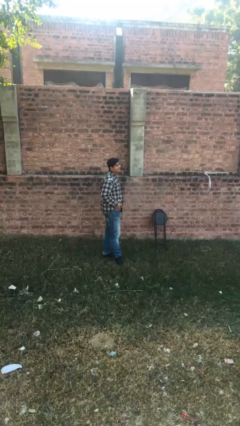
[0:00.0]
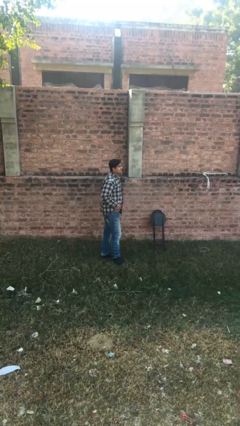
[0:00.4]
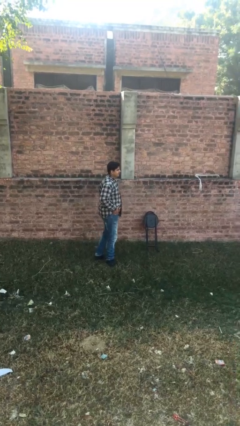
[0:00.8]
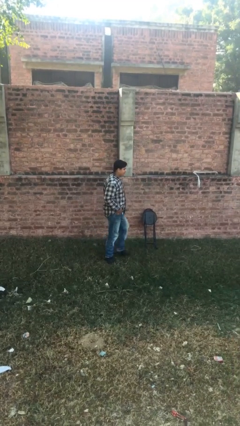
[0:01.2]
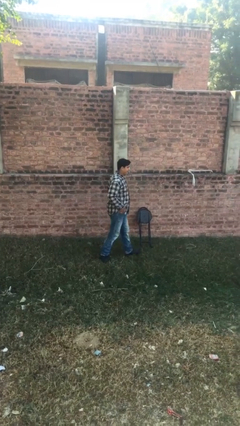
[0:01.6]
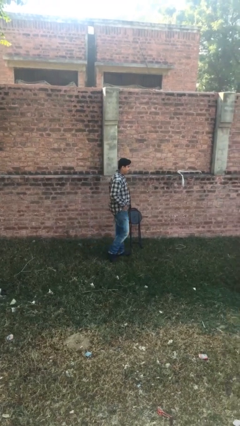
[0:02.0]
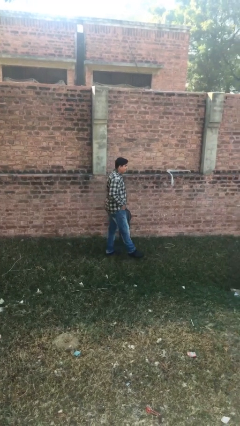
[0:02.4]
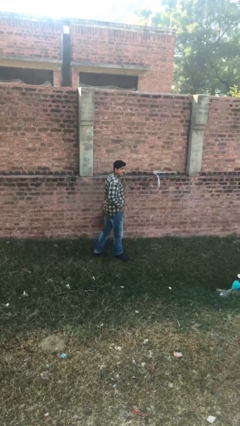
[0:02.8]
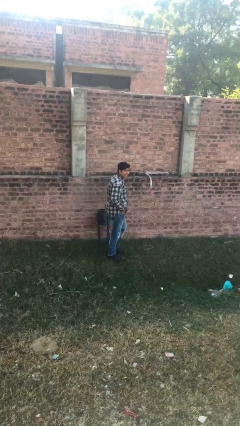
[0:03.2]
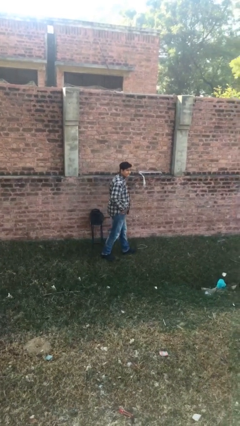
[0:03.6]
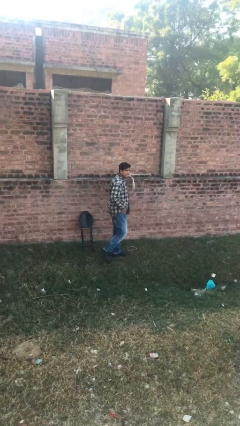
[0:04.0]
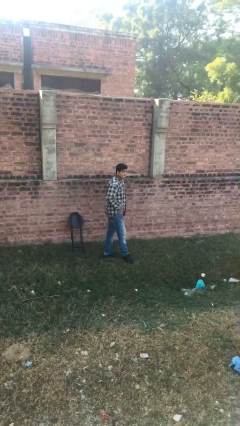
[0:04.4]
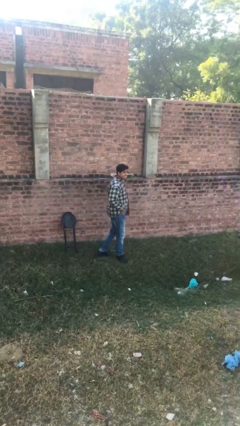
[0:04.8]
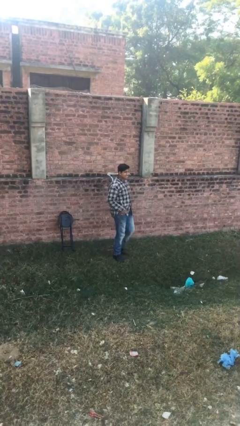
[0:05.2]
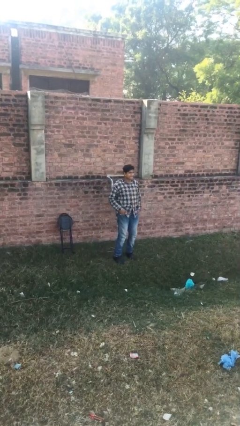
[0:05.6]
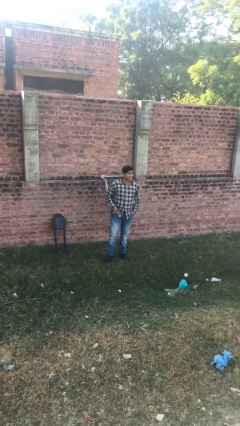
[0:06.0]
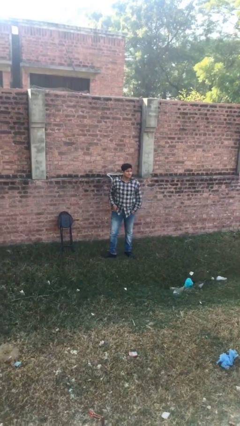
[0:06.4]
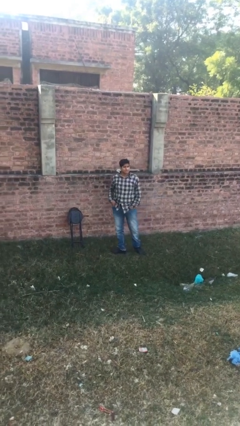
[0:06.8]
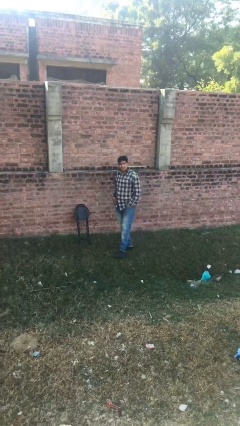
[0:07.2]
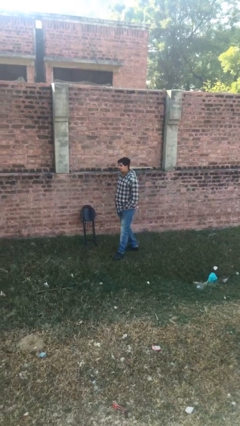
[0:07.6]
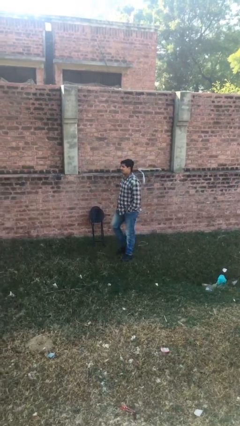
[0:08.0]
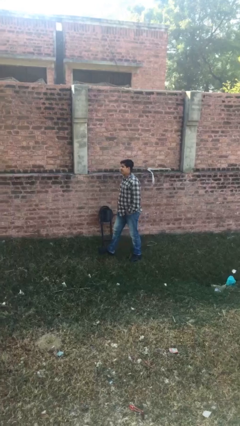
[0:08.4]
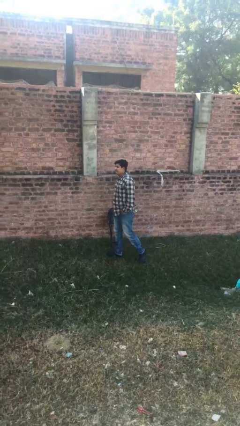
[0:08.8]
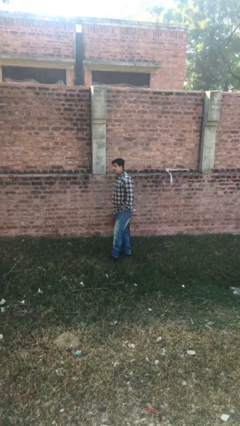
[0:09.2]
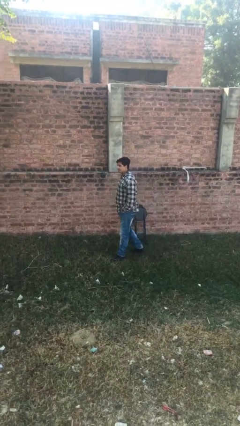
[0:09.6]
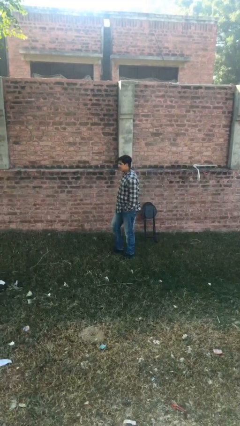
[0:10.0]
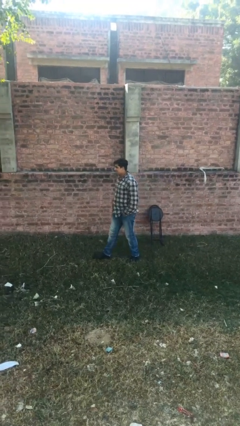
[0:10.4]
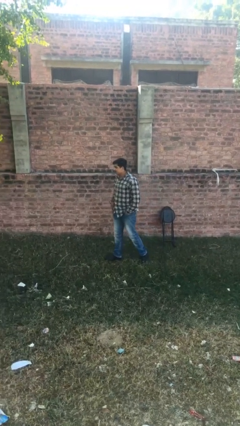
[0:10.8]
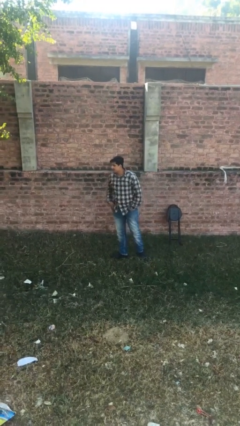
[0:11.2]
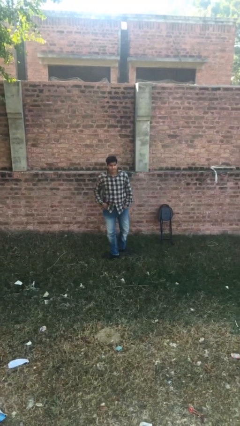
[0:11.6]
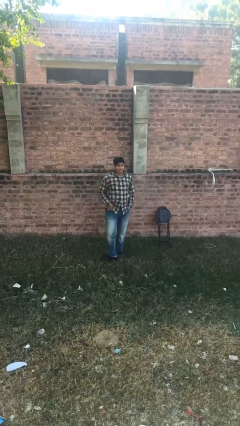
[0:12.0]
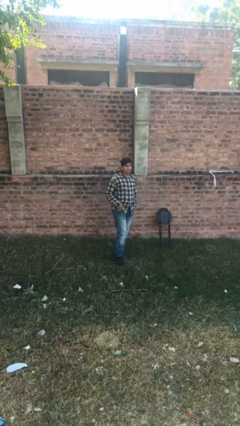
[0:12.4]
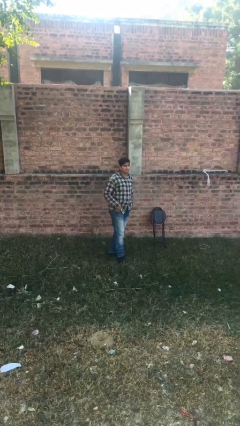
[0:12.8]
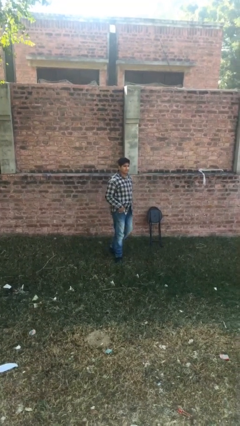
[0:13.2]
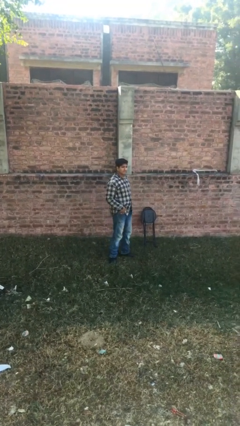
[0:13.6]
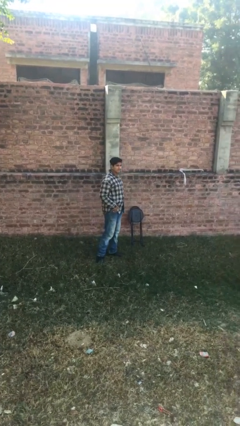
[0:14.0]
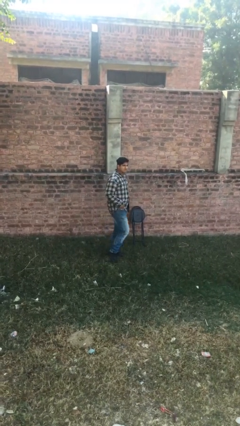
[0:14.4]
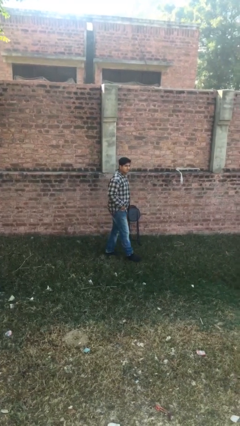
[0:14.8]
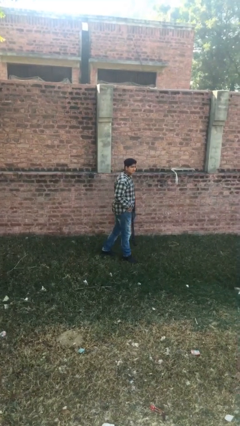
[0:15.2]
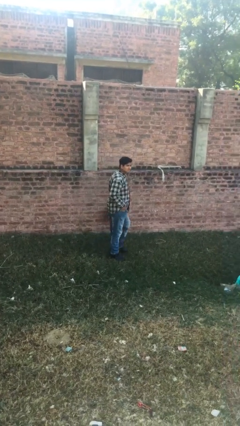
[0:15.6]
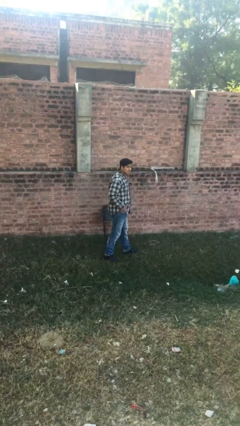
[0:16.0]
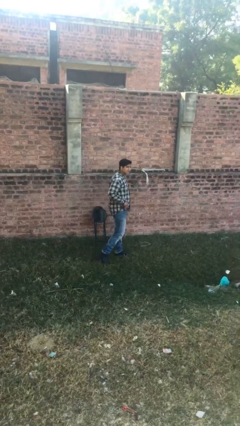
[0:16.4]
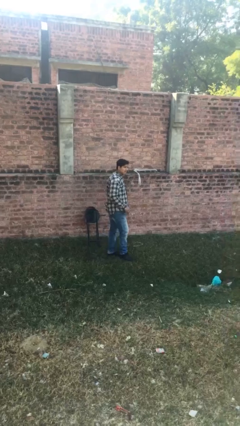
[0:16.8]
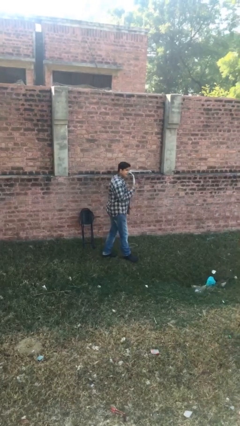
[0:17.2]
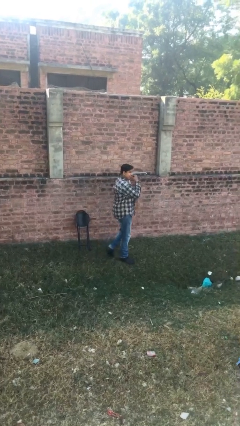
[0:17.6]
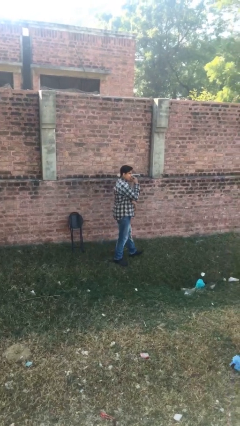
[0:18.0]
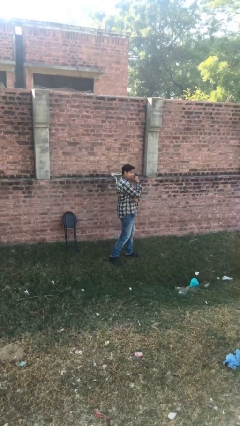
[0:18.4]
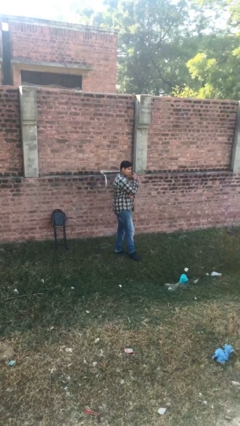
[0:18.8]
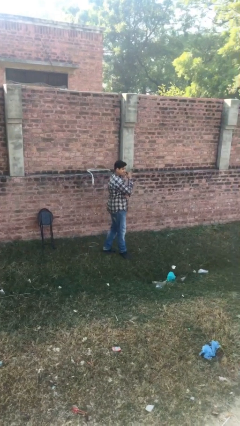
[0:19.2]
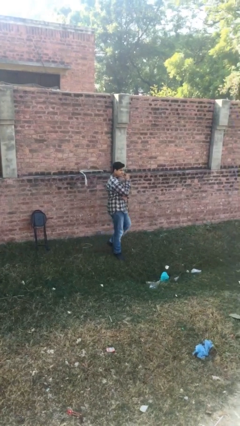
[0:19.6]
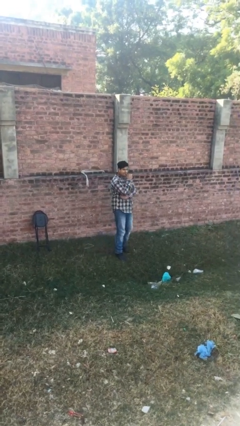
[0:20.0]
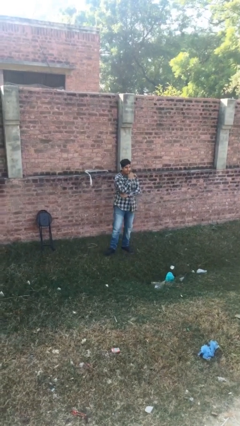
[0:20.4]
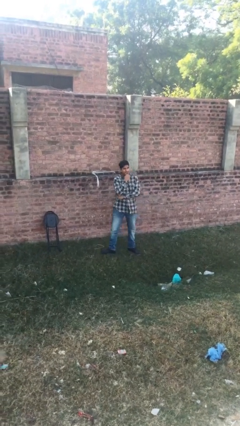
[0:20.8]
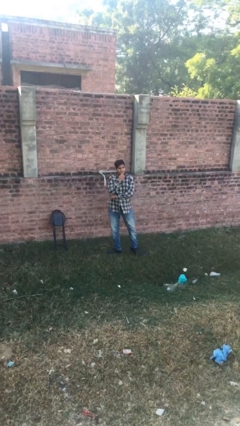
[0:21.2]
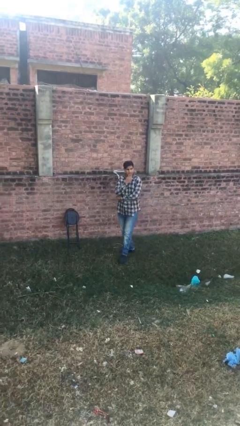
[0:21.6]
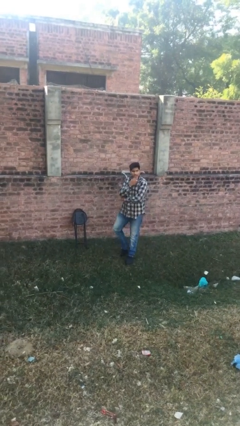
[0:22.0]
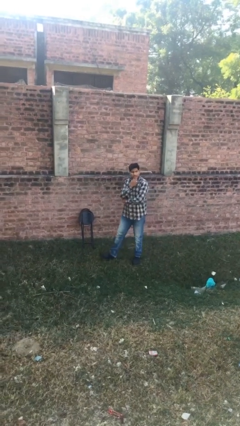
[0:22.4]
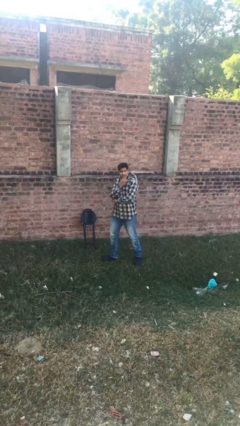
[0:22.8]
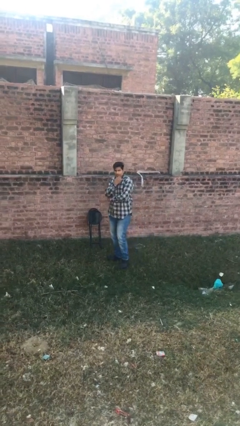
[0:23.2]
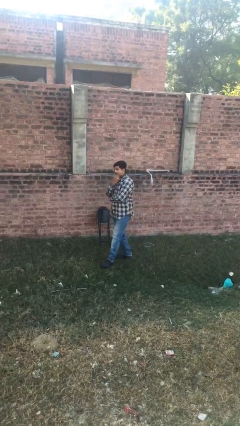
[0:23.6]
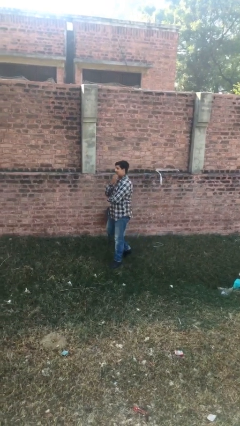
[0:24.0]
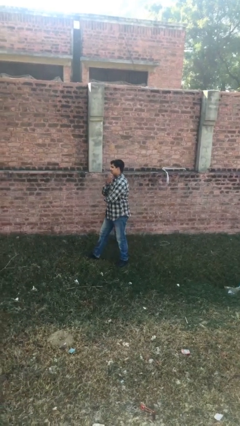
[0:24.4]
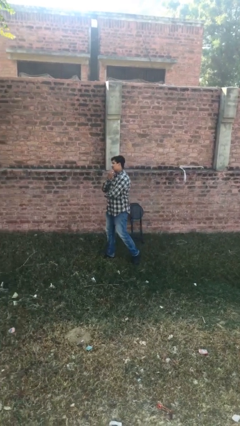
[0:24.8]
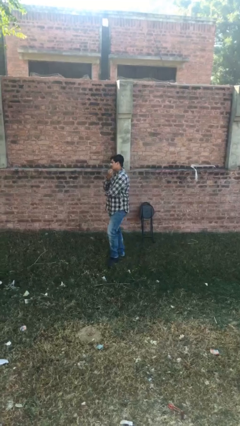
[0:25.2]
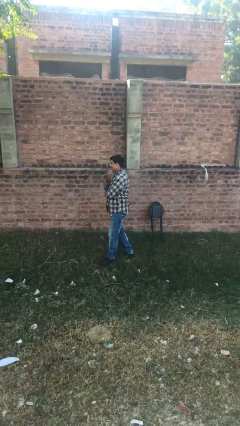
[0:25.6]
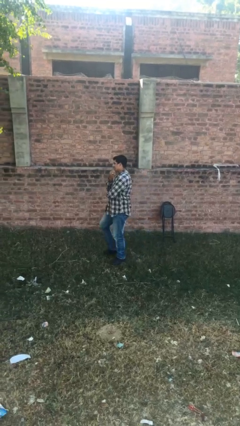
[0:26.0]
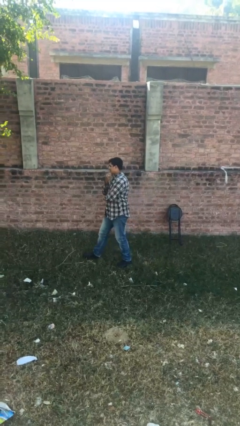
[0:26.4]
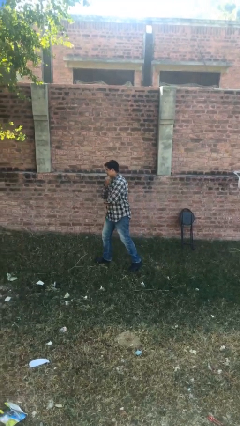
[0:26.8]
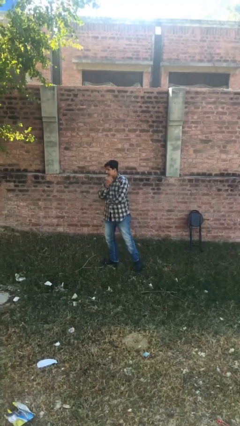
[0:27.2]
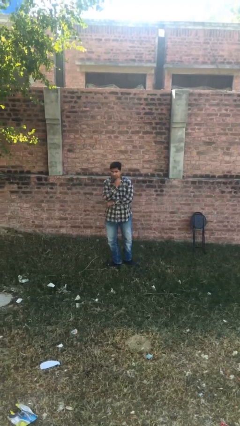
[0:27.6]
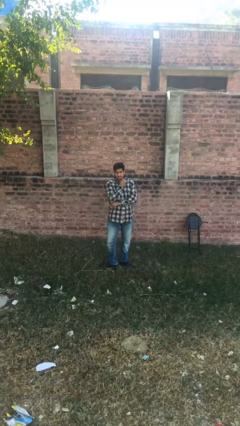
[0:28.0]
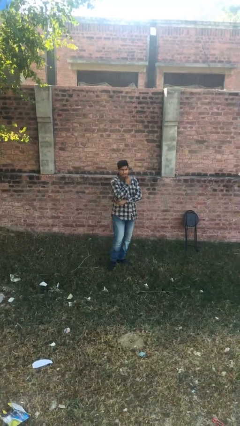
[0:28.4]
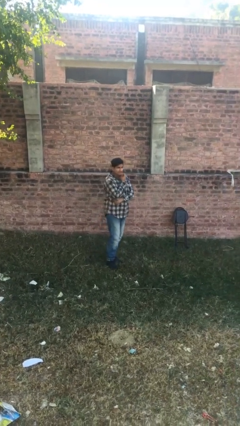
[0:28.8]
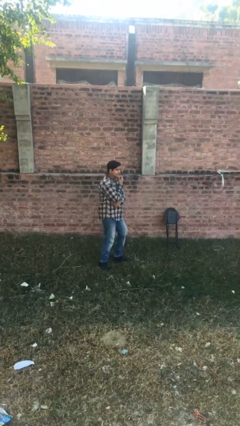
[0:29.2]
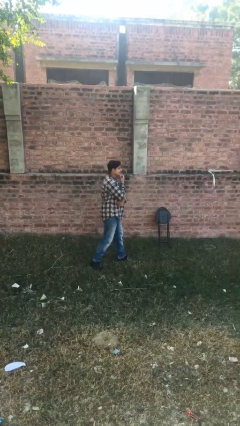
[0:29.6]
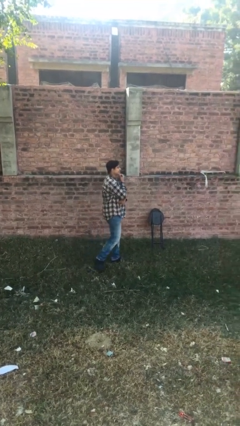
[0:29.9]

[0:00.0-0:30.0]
person walks

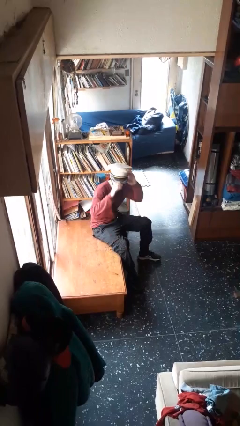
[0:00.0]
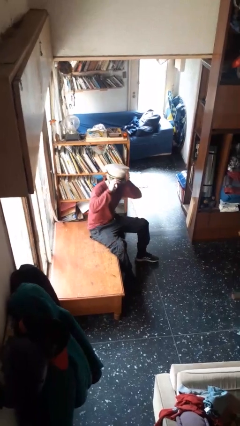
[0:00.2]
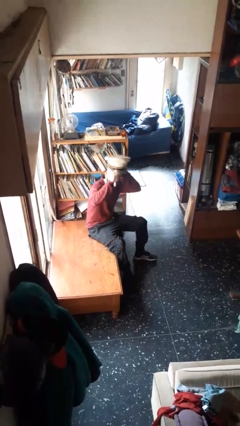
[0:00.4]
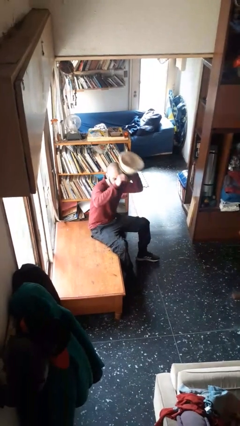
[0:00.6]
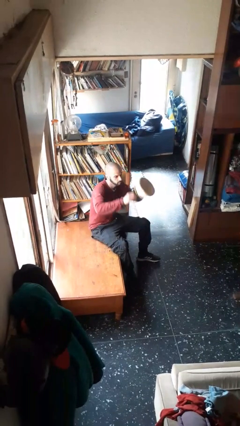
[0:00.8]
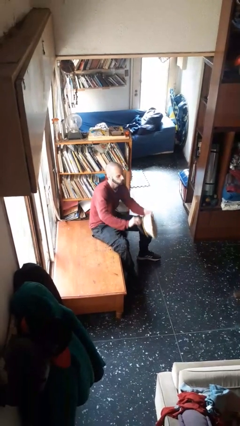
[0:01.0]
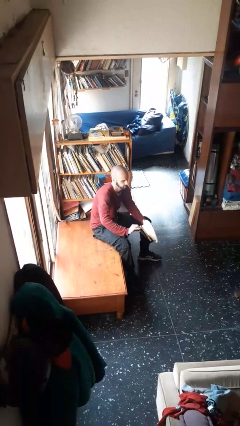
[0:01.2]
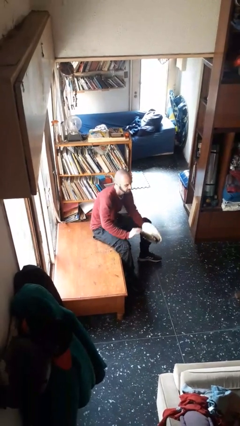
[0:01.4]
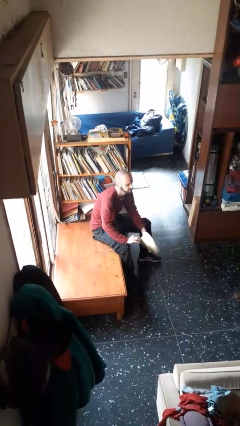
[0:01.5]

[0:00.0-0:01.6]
person takes off hat

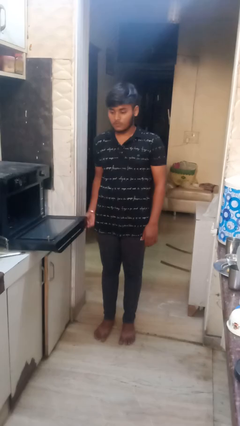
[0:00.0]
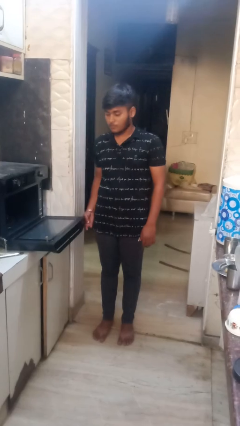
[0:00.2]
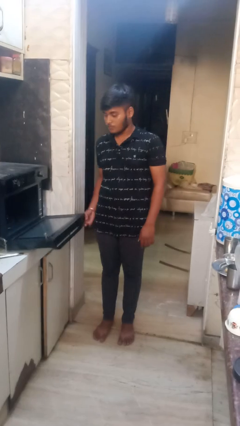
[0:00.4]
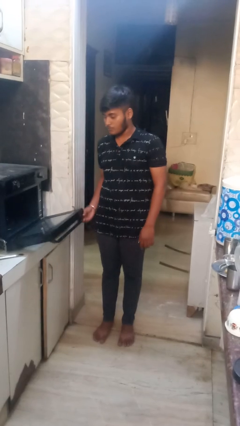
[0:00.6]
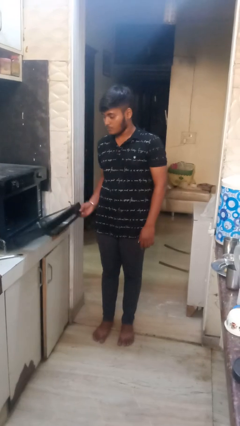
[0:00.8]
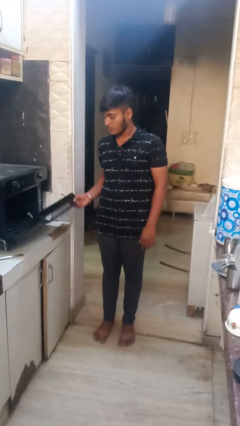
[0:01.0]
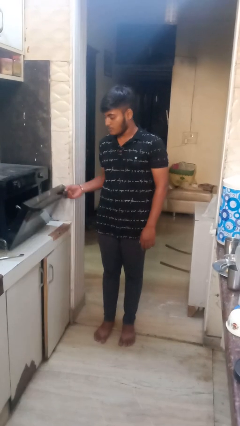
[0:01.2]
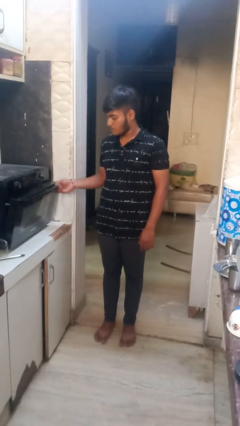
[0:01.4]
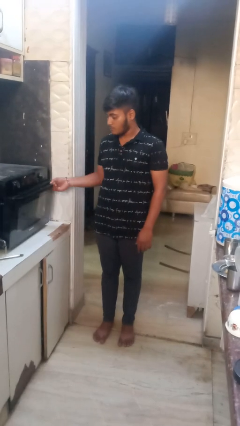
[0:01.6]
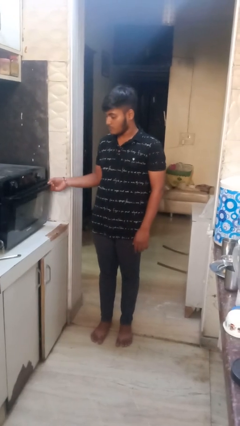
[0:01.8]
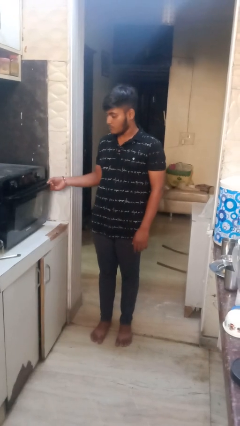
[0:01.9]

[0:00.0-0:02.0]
person closes oven door
